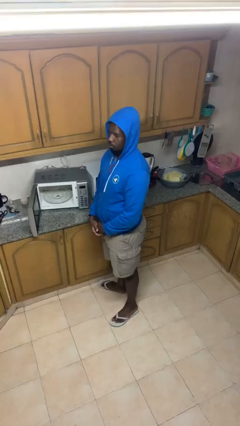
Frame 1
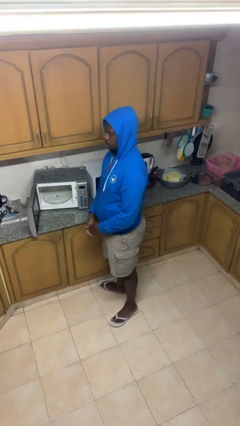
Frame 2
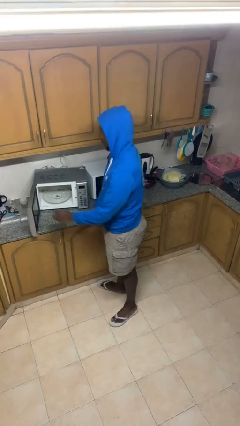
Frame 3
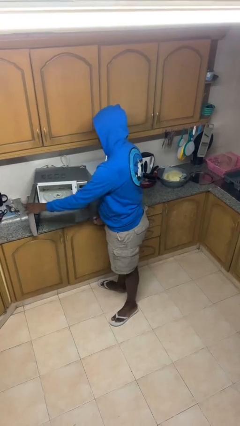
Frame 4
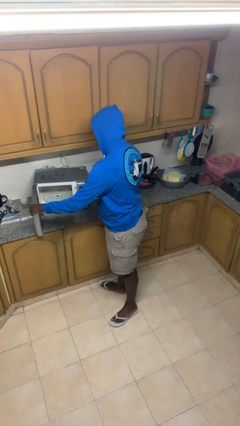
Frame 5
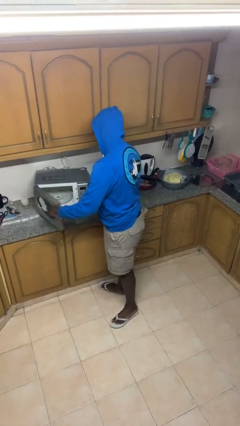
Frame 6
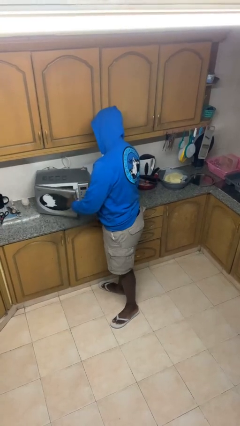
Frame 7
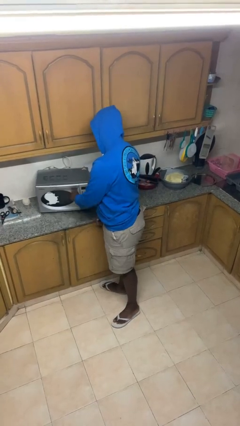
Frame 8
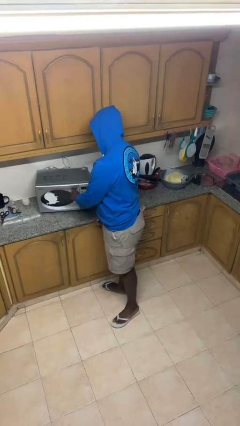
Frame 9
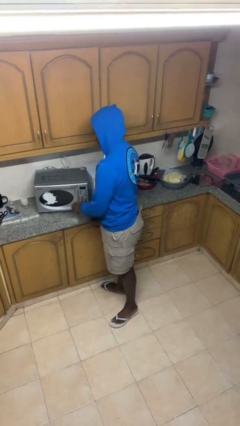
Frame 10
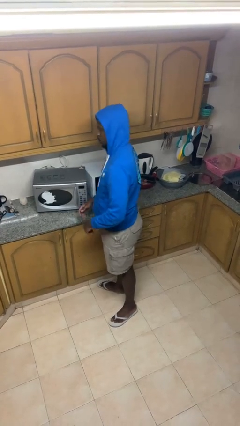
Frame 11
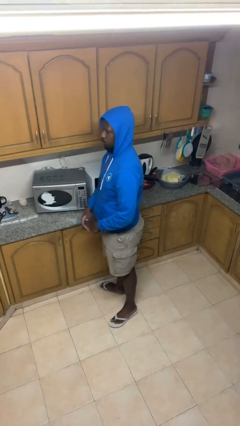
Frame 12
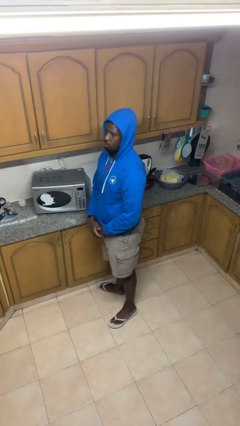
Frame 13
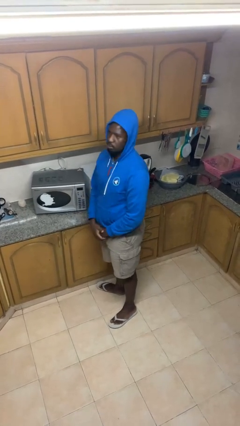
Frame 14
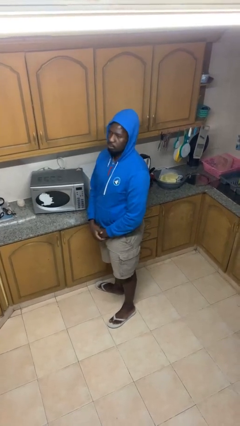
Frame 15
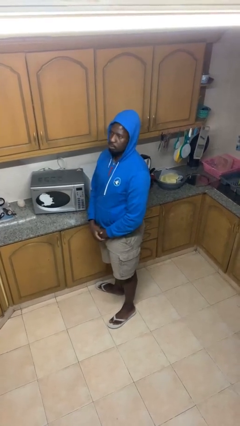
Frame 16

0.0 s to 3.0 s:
person closes microwave

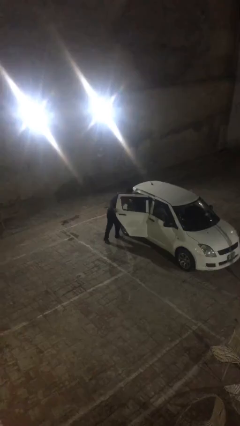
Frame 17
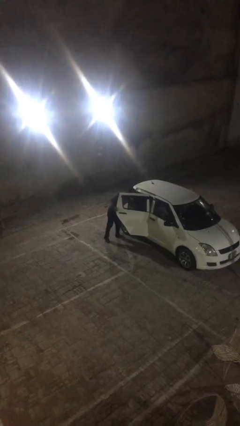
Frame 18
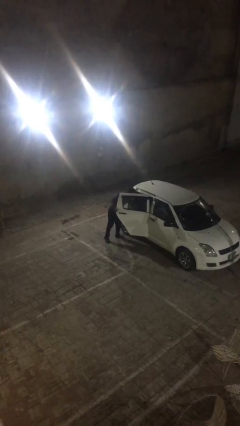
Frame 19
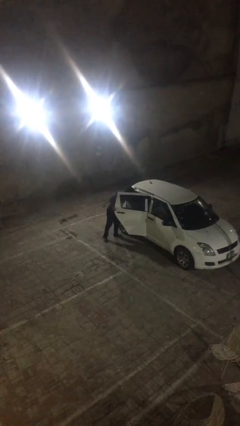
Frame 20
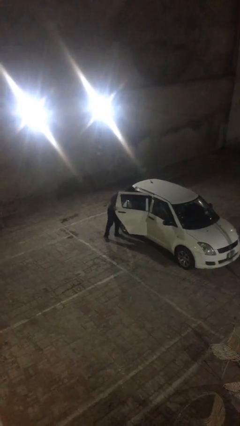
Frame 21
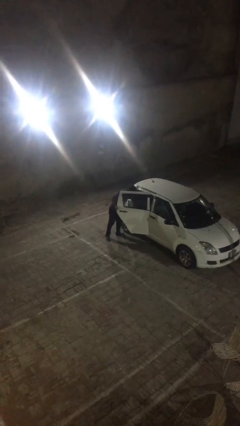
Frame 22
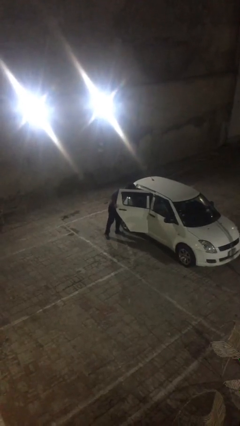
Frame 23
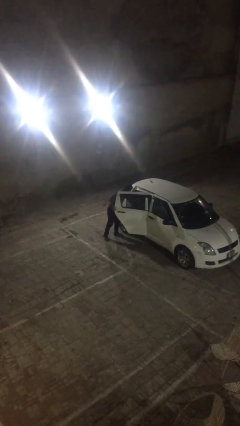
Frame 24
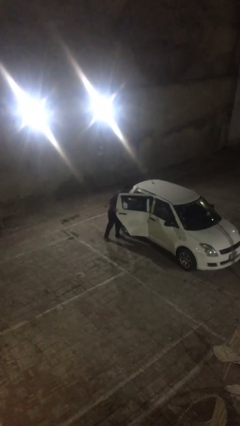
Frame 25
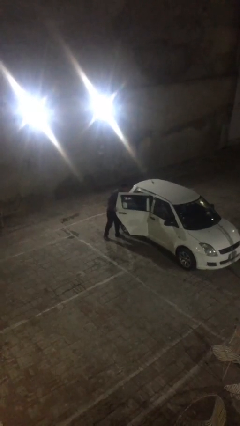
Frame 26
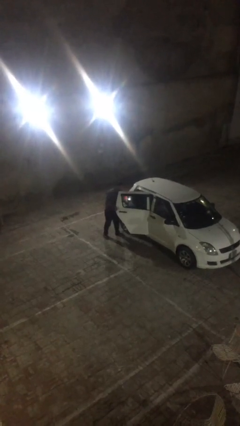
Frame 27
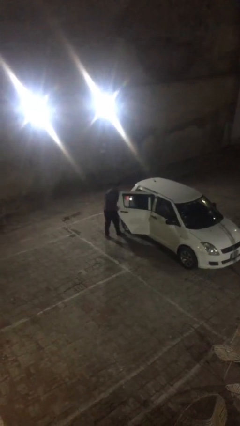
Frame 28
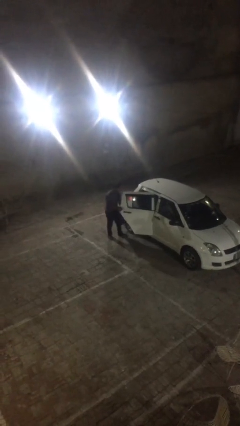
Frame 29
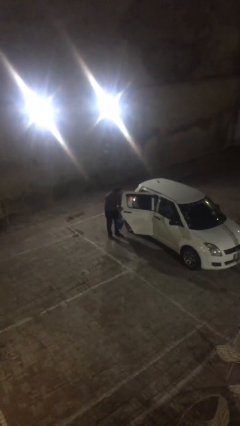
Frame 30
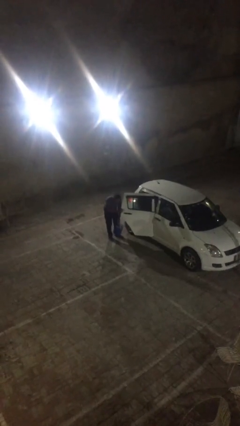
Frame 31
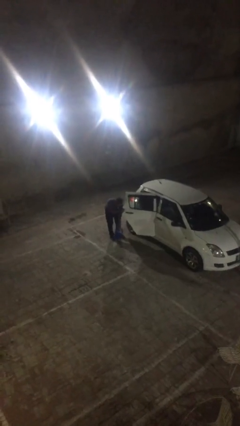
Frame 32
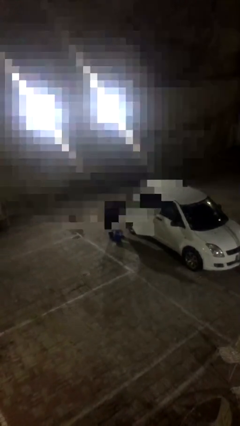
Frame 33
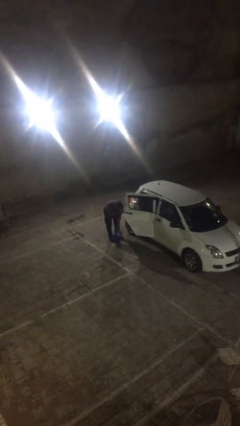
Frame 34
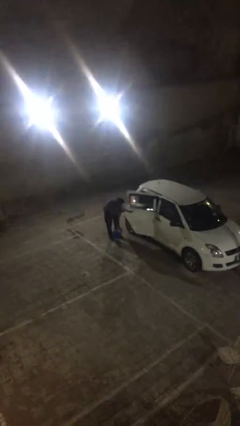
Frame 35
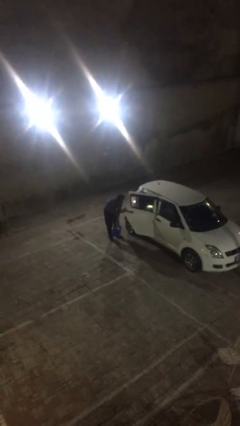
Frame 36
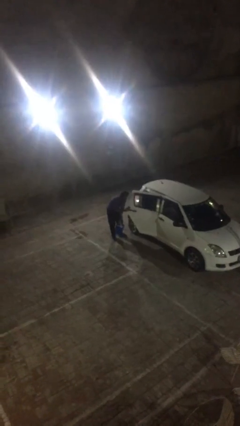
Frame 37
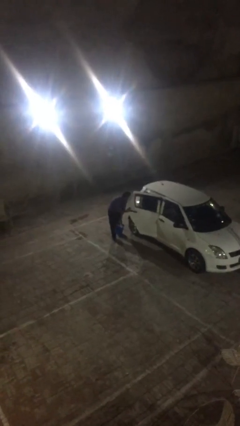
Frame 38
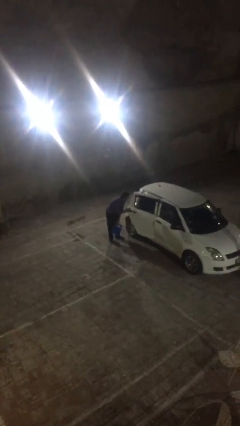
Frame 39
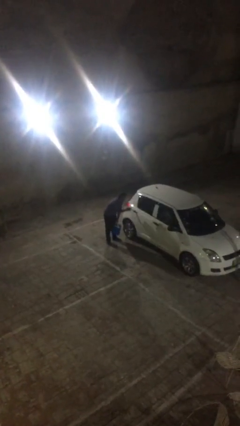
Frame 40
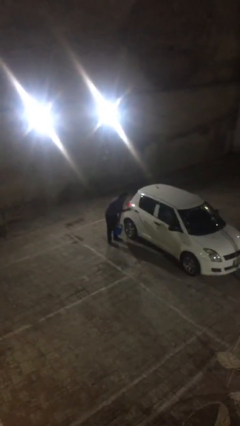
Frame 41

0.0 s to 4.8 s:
person unloads car

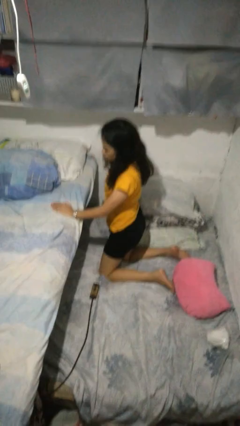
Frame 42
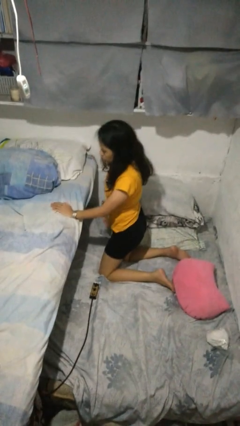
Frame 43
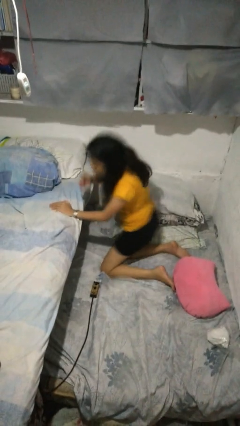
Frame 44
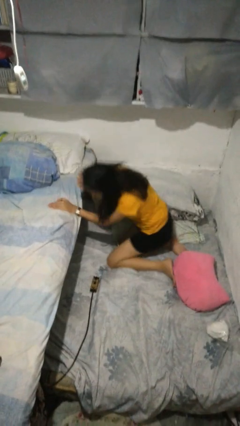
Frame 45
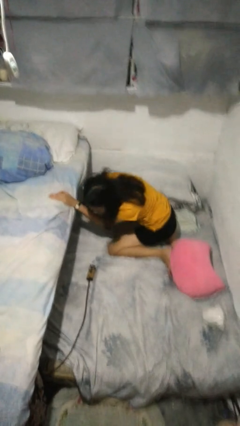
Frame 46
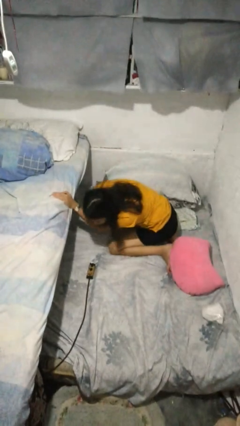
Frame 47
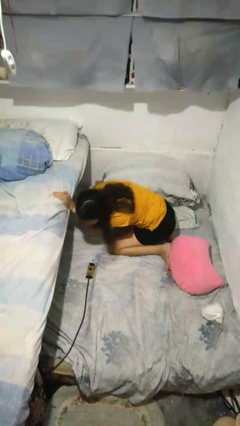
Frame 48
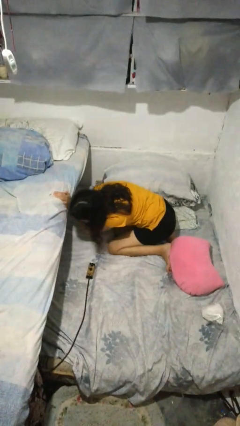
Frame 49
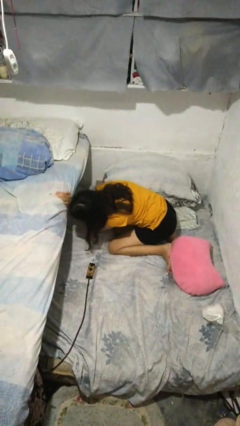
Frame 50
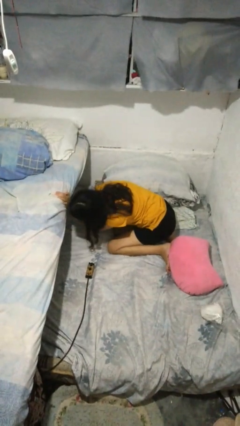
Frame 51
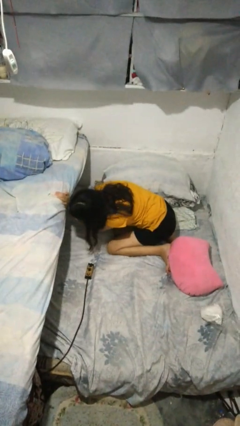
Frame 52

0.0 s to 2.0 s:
person searches under bed

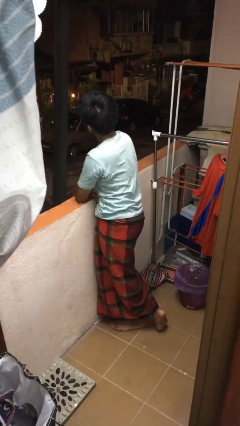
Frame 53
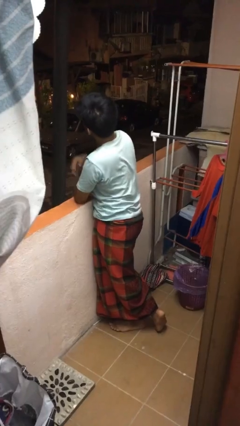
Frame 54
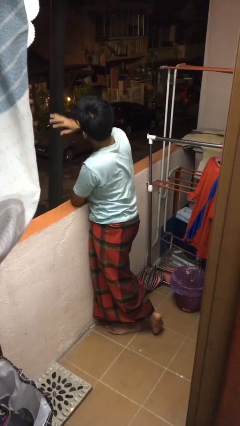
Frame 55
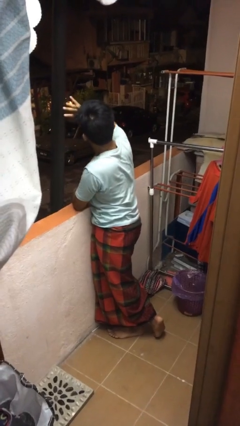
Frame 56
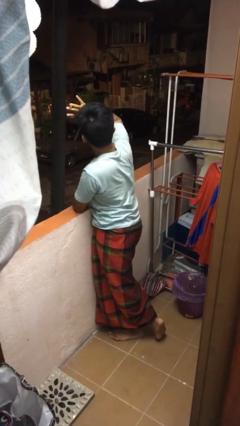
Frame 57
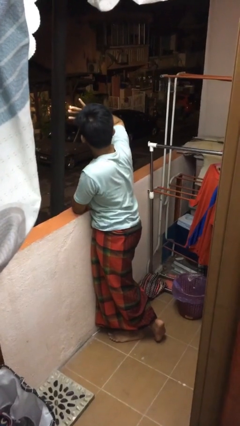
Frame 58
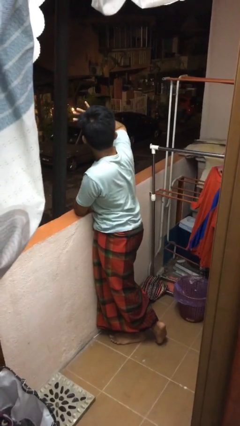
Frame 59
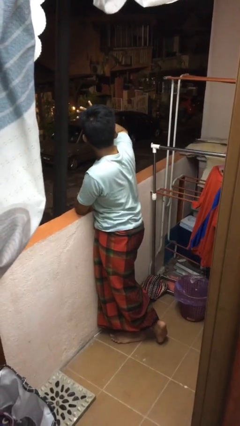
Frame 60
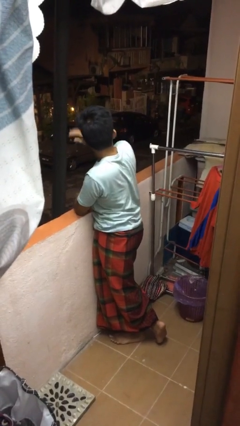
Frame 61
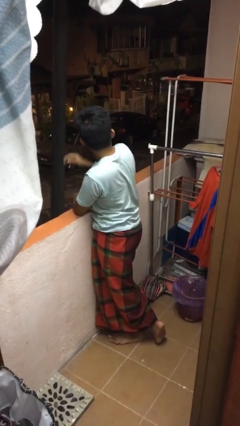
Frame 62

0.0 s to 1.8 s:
person shades eyes

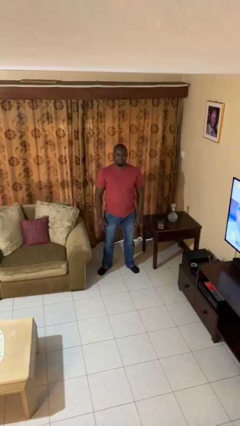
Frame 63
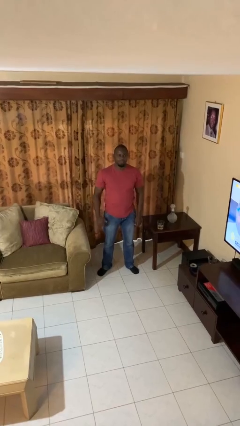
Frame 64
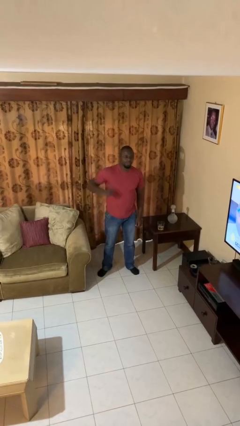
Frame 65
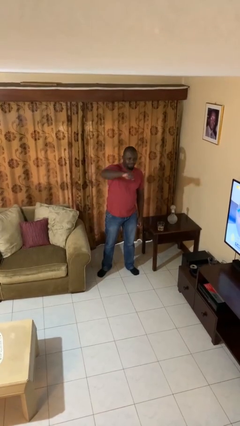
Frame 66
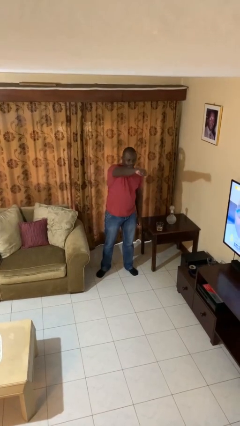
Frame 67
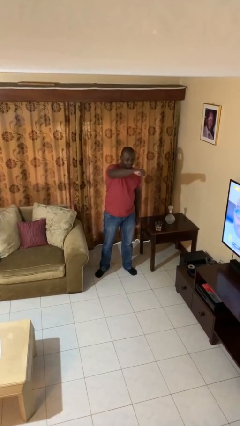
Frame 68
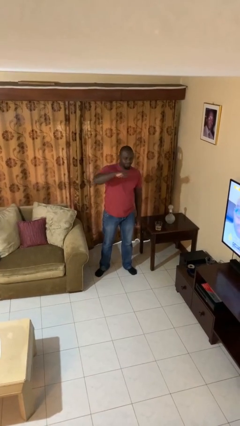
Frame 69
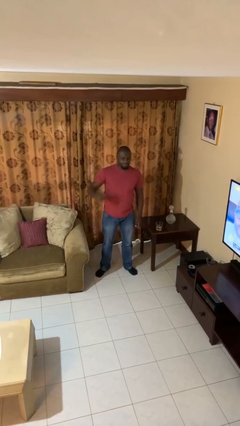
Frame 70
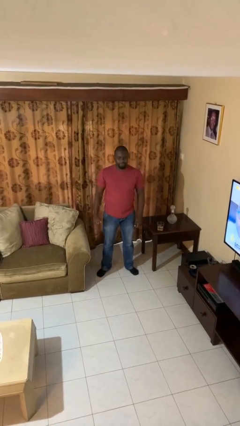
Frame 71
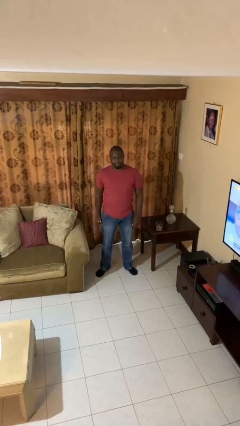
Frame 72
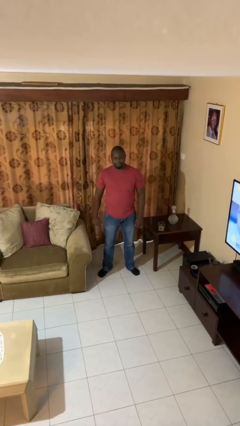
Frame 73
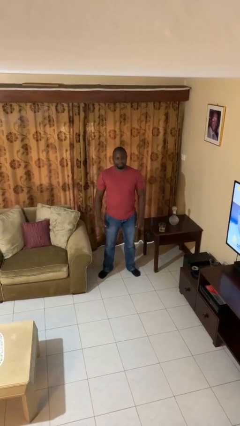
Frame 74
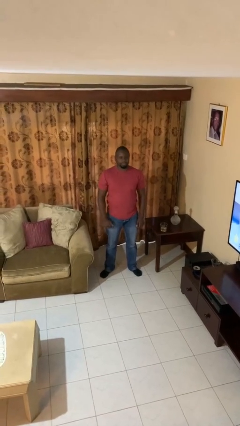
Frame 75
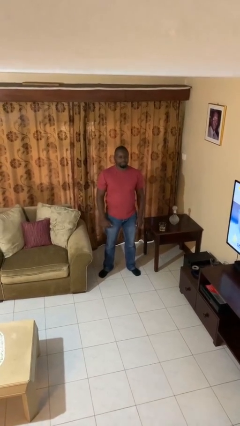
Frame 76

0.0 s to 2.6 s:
person punches

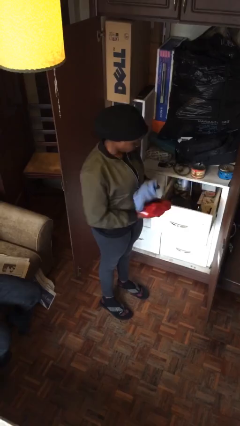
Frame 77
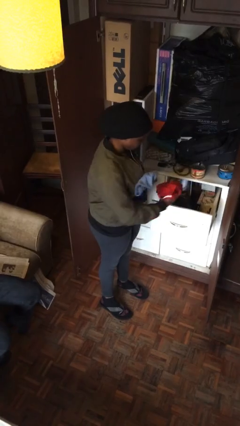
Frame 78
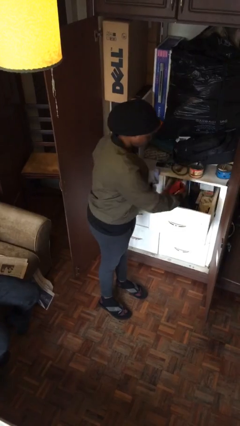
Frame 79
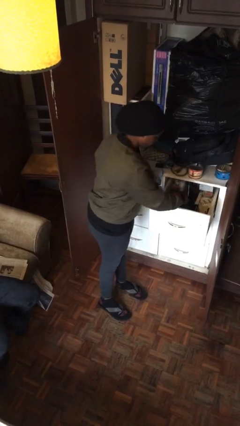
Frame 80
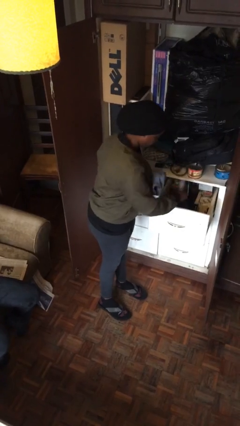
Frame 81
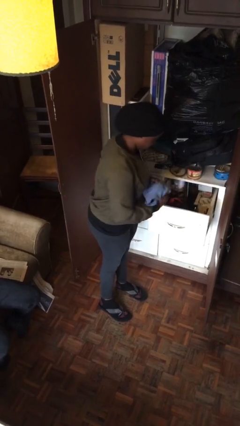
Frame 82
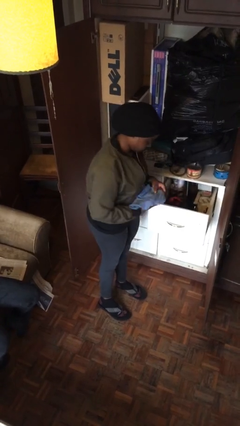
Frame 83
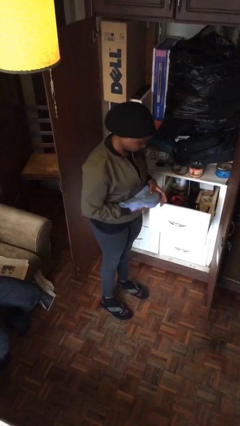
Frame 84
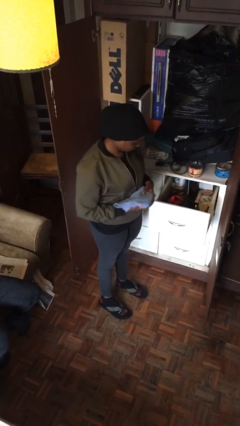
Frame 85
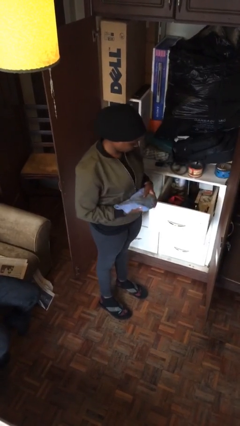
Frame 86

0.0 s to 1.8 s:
person puts clothes into dresser

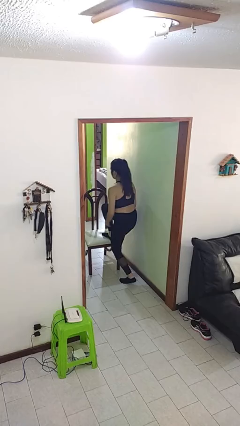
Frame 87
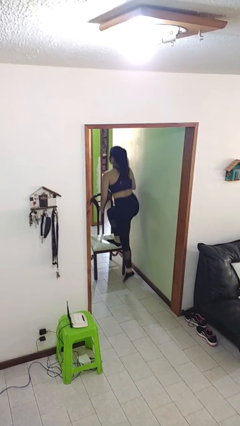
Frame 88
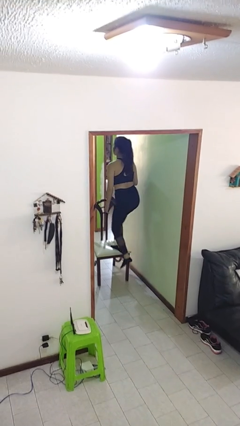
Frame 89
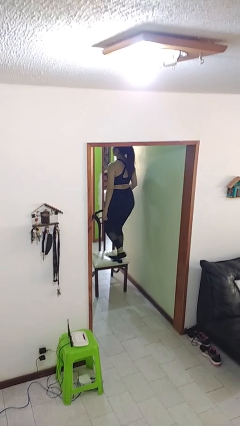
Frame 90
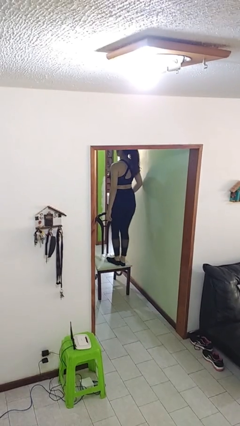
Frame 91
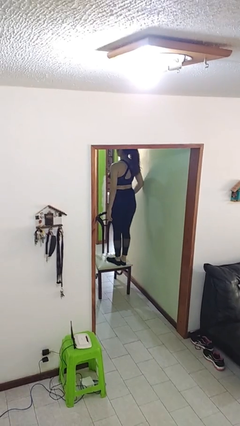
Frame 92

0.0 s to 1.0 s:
person climbs on chair
